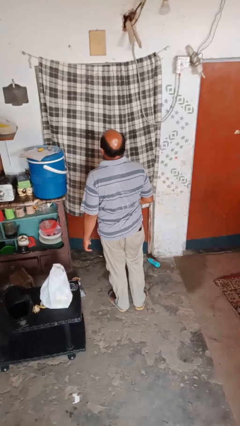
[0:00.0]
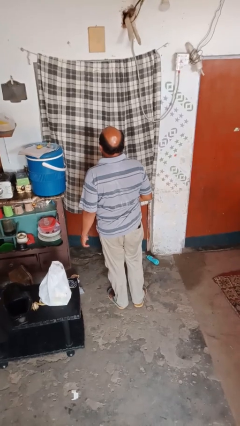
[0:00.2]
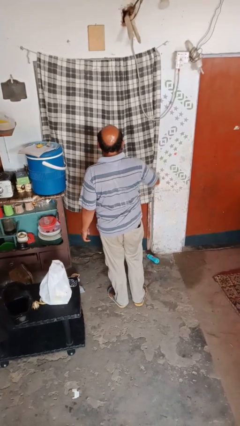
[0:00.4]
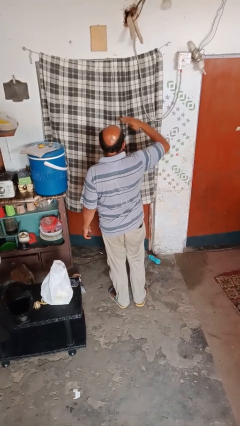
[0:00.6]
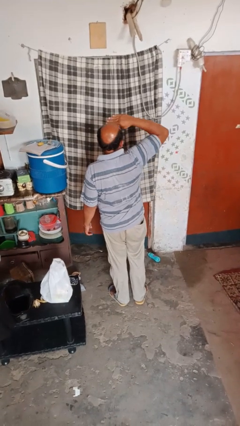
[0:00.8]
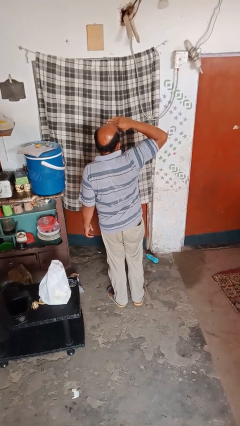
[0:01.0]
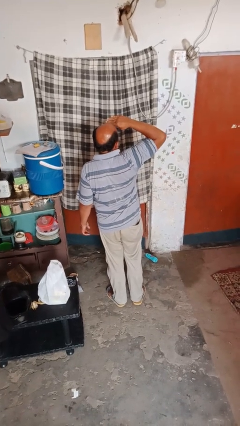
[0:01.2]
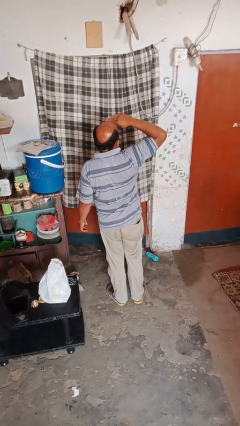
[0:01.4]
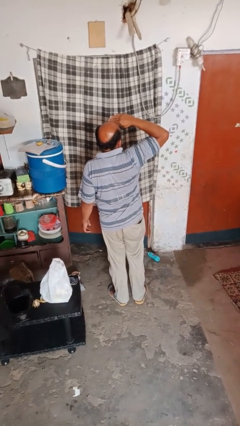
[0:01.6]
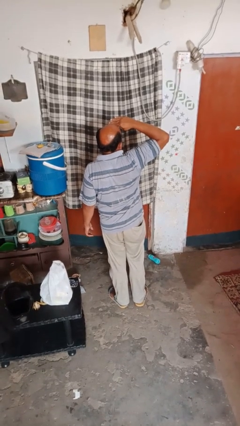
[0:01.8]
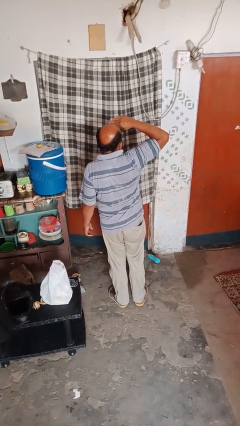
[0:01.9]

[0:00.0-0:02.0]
person salutes

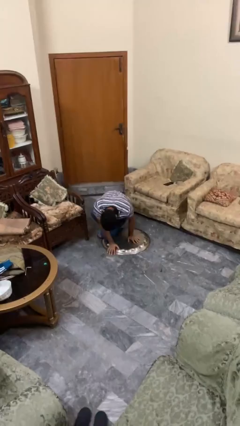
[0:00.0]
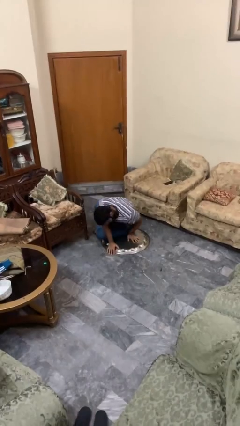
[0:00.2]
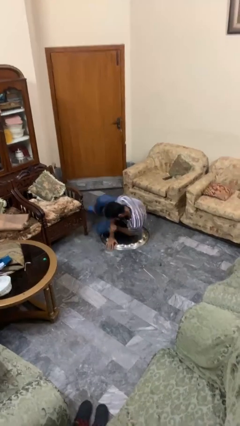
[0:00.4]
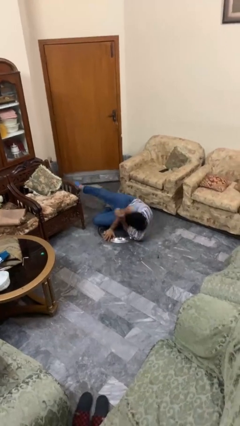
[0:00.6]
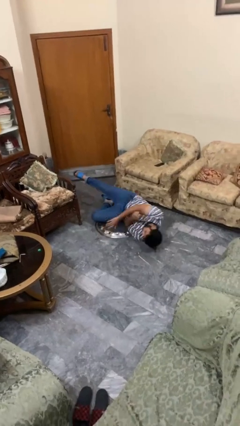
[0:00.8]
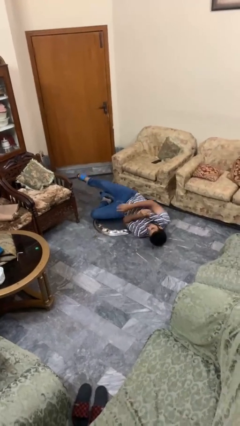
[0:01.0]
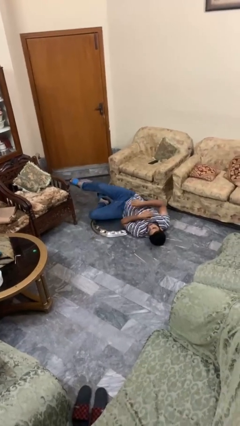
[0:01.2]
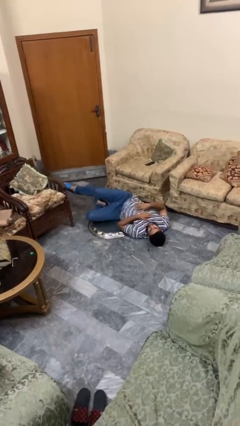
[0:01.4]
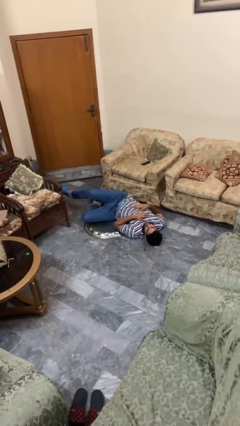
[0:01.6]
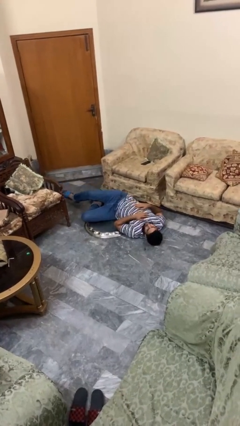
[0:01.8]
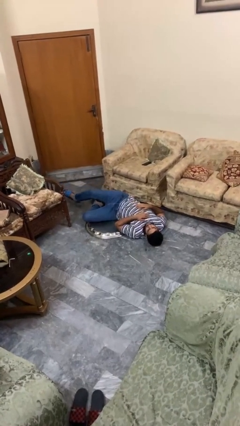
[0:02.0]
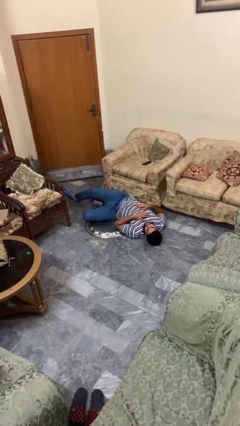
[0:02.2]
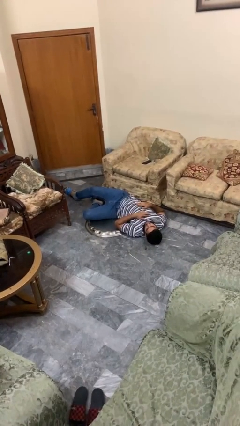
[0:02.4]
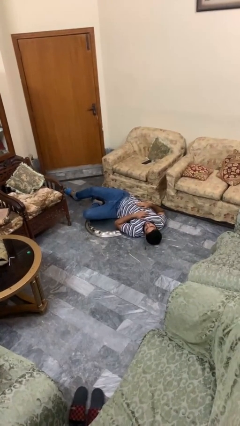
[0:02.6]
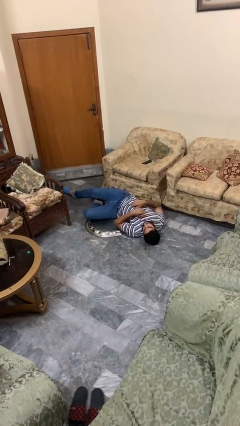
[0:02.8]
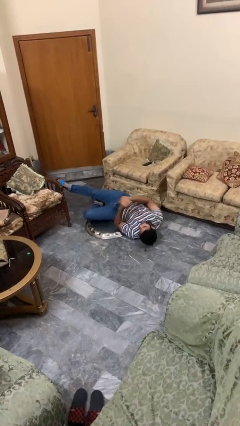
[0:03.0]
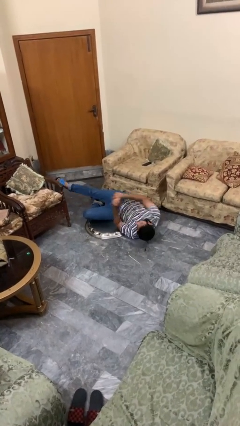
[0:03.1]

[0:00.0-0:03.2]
person lies down on floor

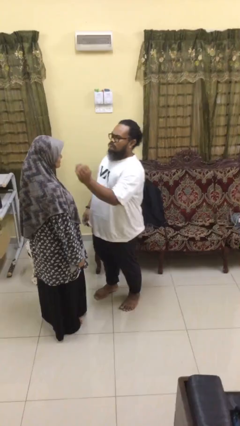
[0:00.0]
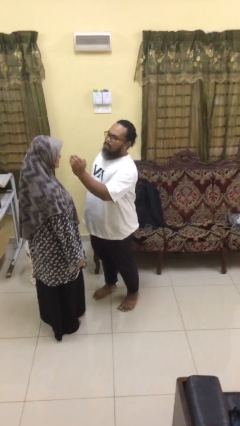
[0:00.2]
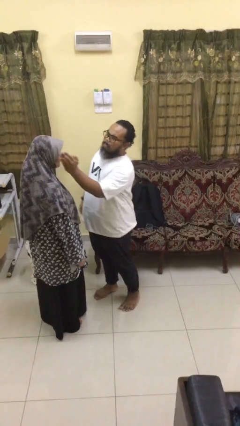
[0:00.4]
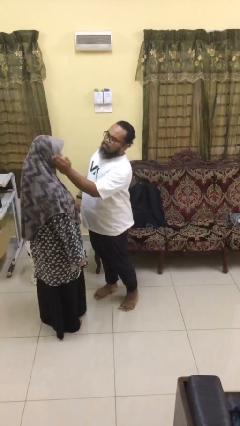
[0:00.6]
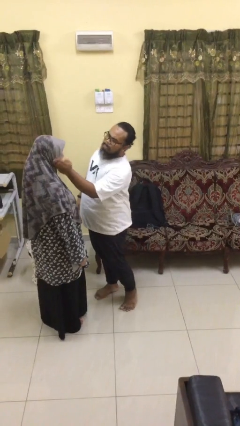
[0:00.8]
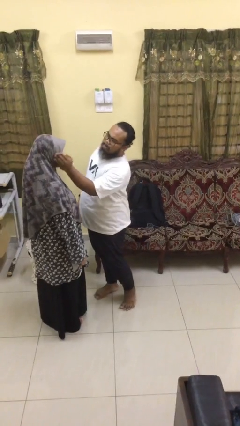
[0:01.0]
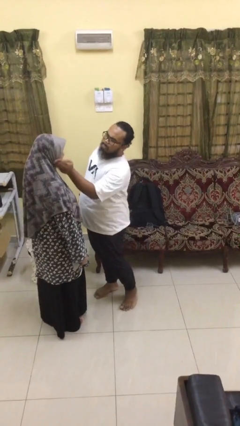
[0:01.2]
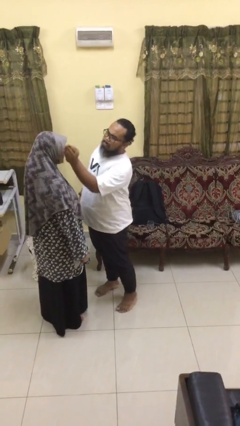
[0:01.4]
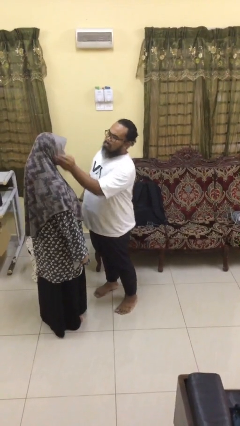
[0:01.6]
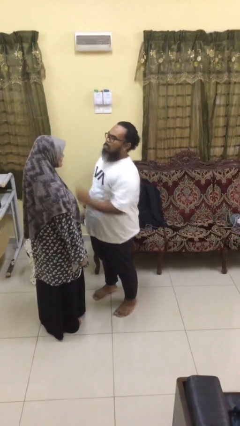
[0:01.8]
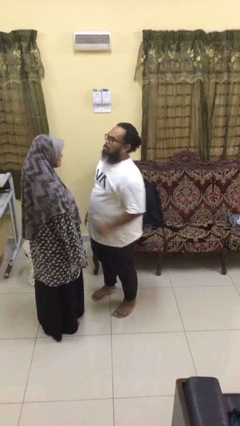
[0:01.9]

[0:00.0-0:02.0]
person touches face of person

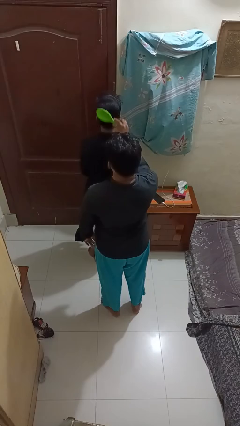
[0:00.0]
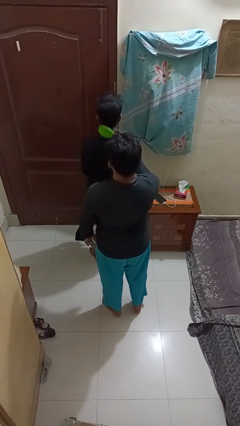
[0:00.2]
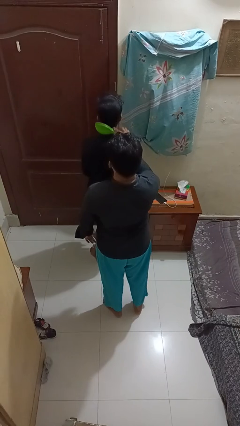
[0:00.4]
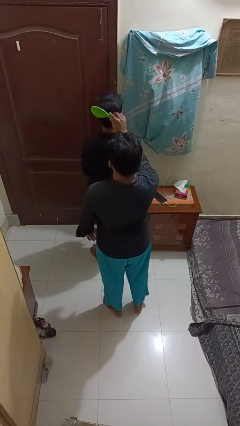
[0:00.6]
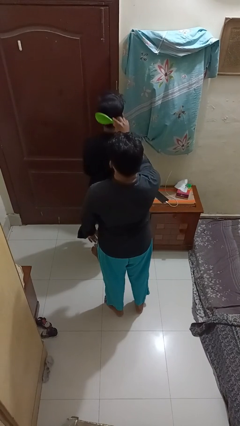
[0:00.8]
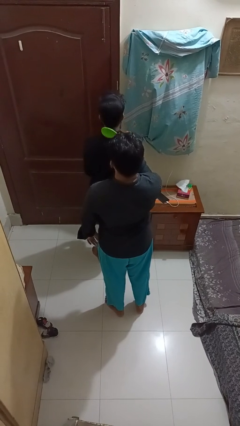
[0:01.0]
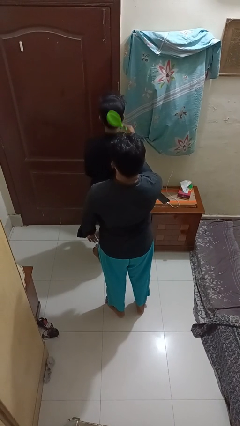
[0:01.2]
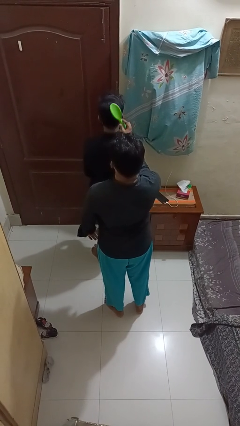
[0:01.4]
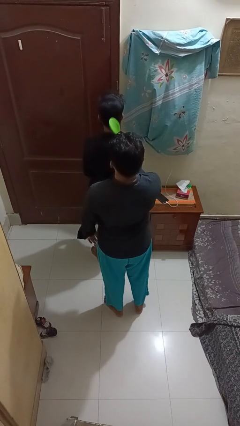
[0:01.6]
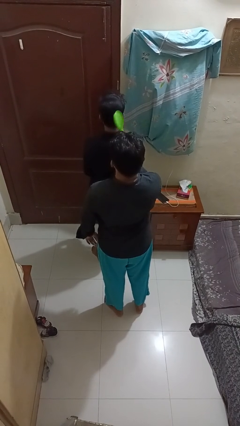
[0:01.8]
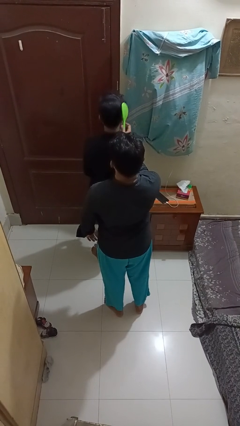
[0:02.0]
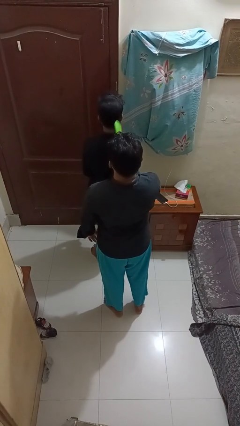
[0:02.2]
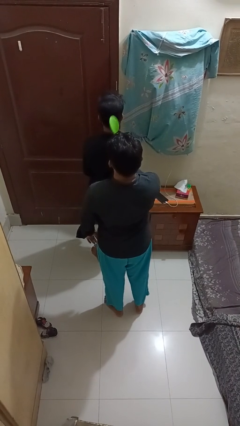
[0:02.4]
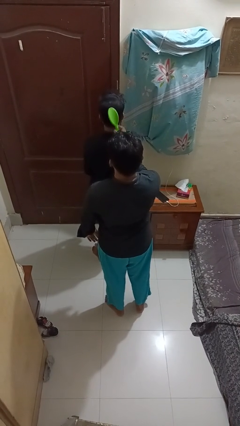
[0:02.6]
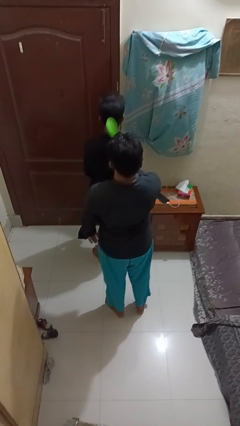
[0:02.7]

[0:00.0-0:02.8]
person brushes hair of person

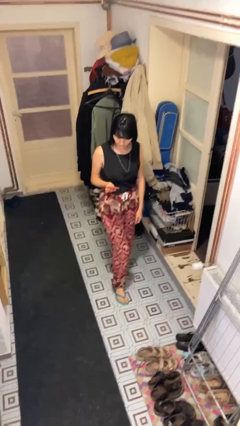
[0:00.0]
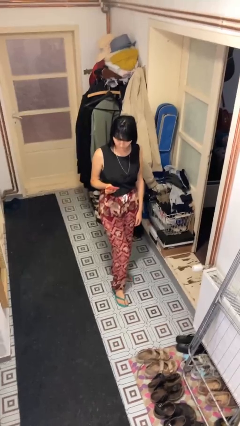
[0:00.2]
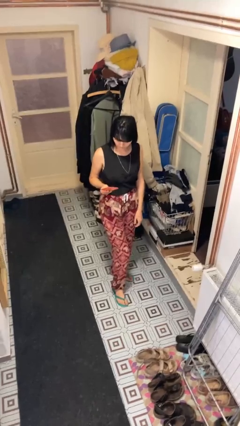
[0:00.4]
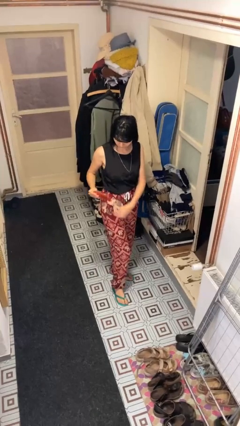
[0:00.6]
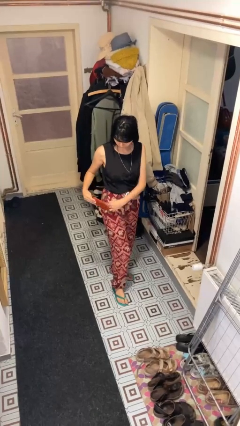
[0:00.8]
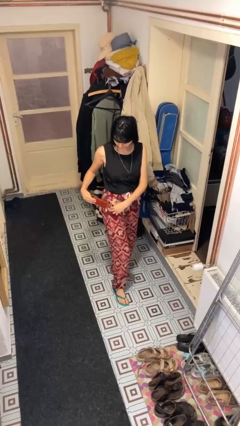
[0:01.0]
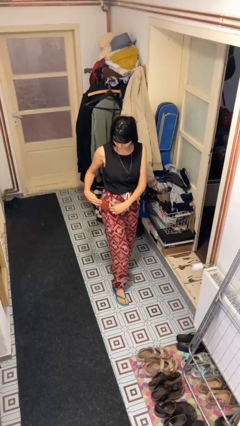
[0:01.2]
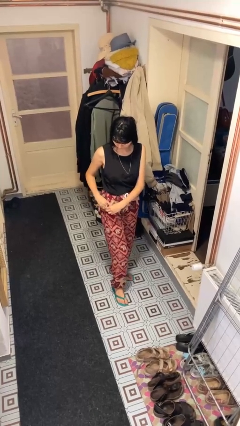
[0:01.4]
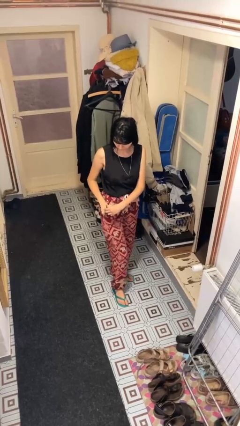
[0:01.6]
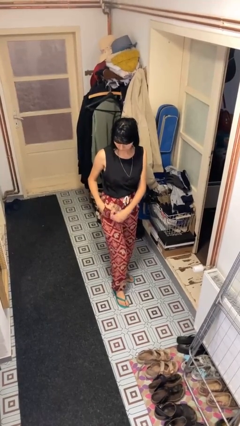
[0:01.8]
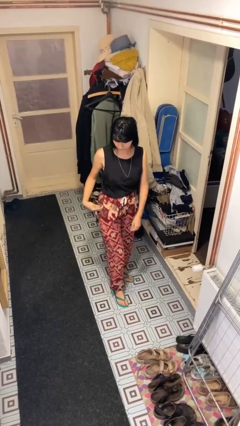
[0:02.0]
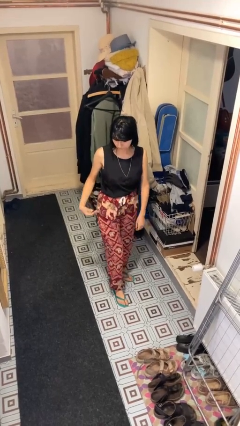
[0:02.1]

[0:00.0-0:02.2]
person puts phone into pocket

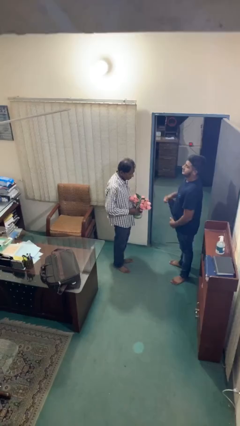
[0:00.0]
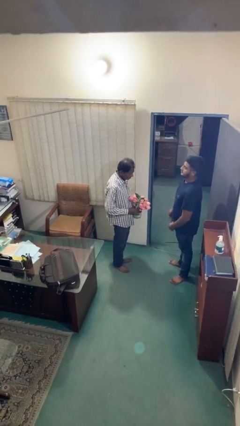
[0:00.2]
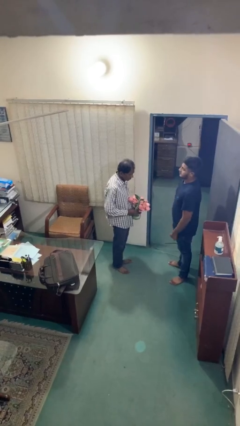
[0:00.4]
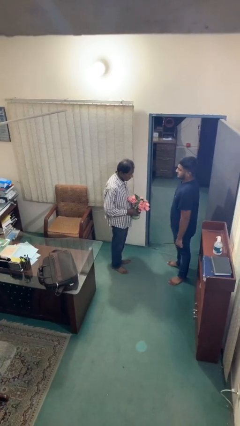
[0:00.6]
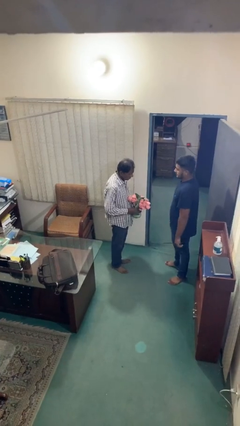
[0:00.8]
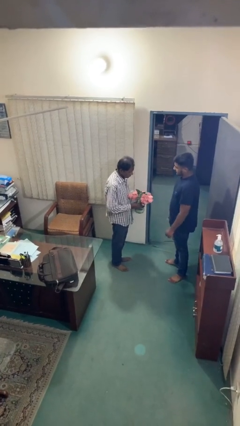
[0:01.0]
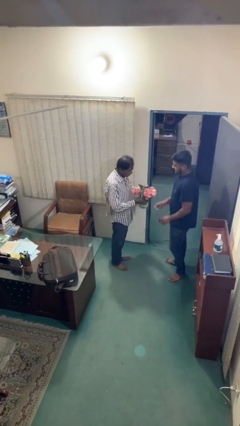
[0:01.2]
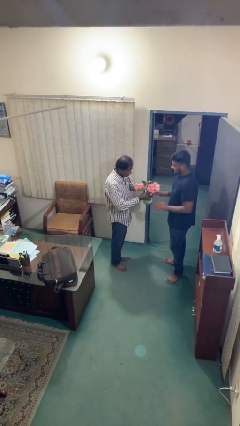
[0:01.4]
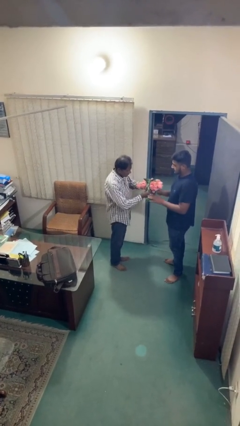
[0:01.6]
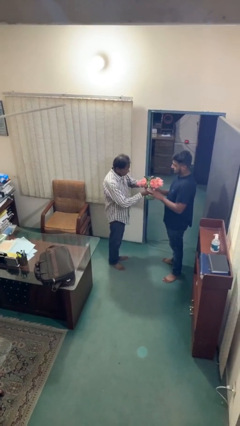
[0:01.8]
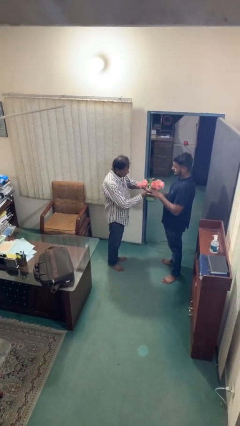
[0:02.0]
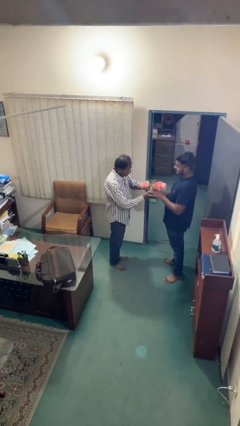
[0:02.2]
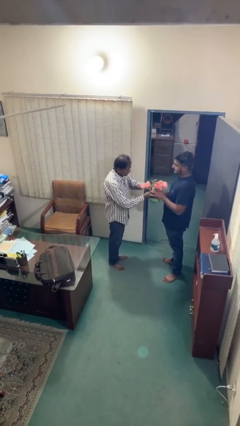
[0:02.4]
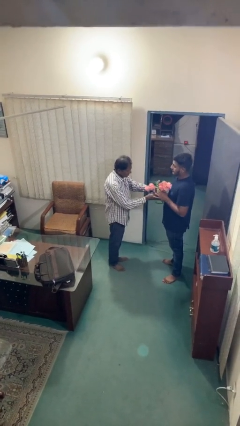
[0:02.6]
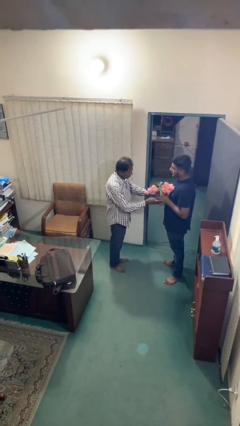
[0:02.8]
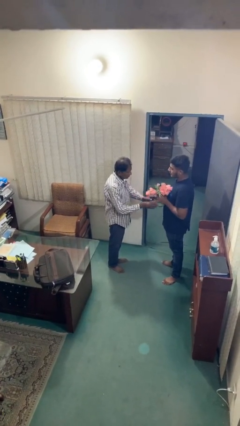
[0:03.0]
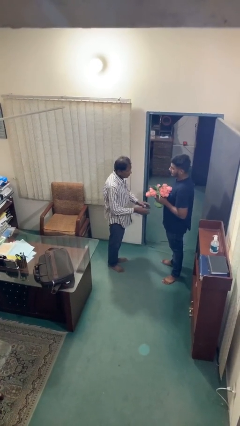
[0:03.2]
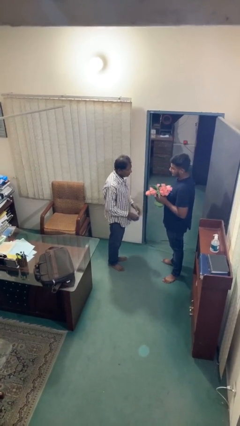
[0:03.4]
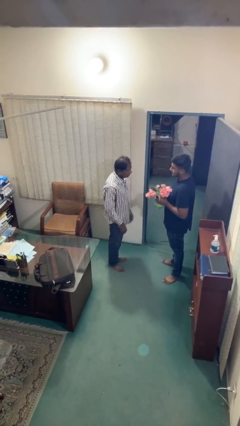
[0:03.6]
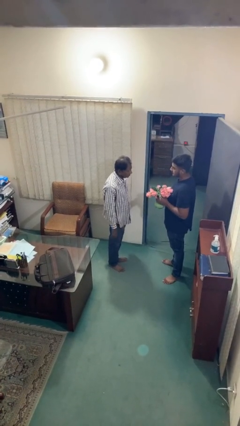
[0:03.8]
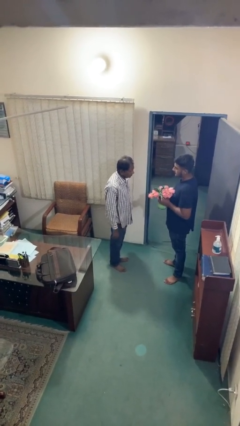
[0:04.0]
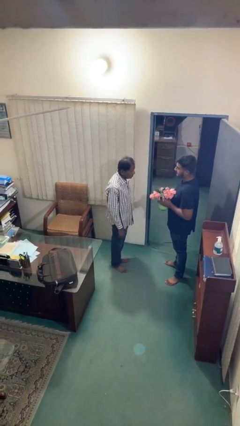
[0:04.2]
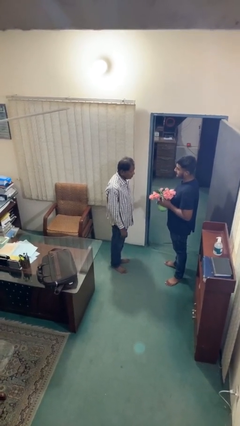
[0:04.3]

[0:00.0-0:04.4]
person transfers object to person

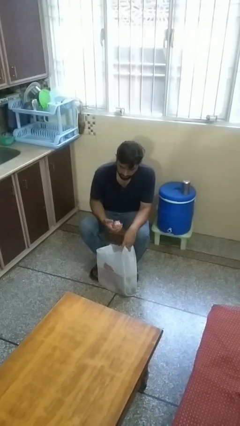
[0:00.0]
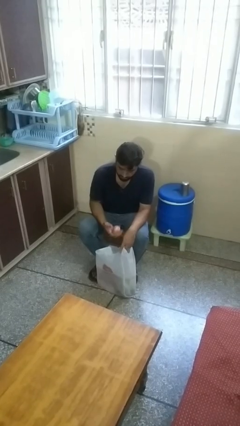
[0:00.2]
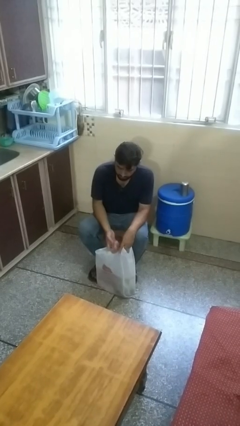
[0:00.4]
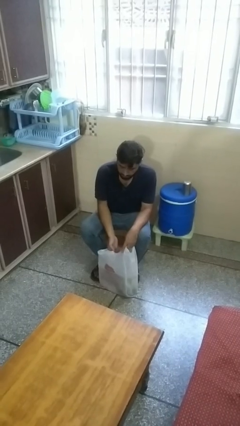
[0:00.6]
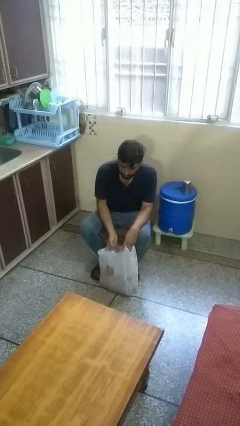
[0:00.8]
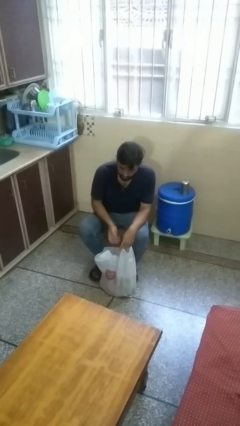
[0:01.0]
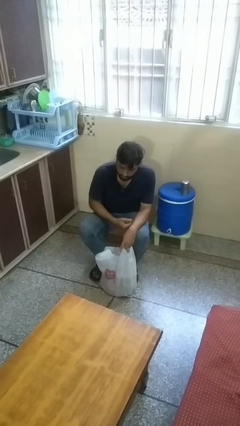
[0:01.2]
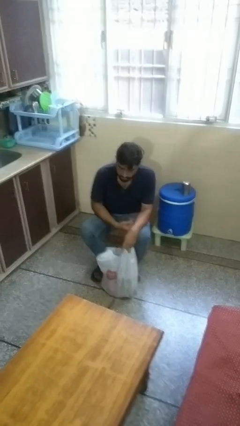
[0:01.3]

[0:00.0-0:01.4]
person puts object into bag
